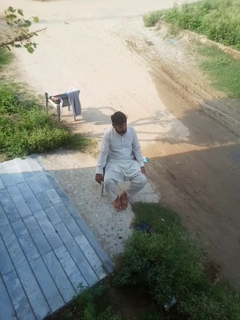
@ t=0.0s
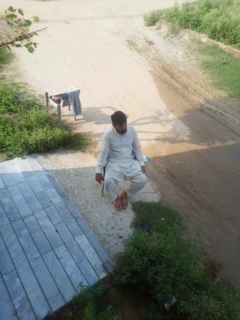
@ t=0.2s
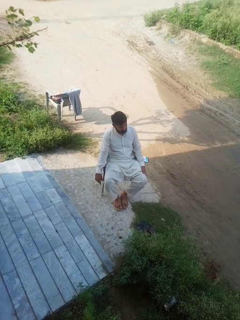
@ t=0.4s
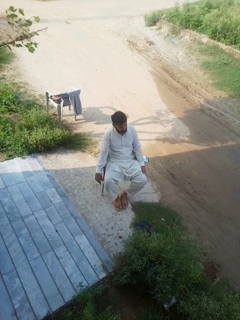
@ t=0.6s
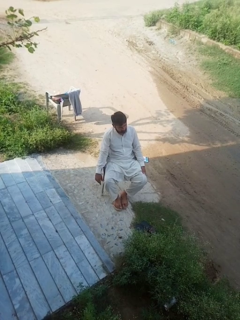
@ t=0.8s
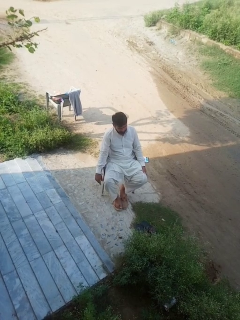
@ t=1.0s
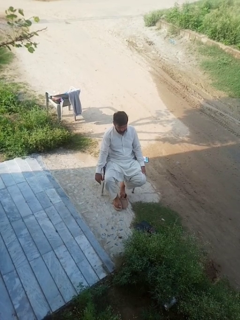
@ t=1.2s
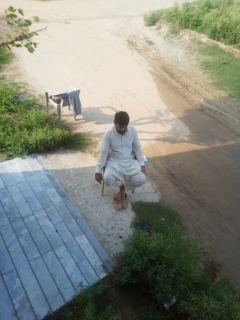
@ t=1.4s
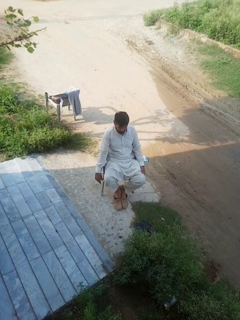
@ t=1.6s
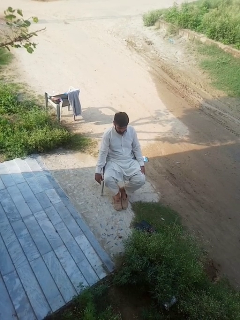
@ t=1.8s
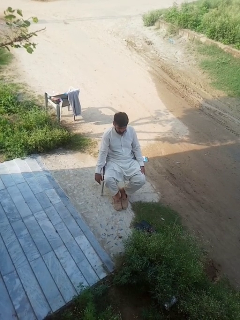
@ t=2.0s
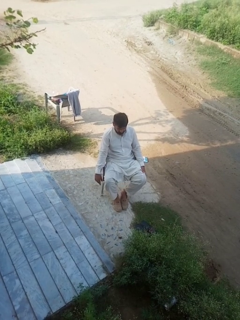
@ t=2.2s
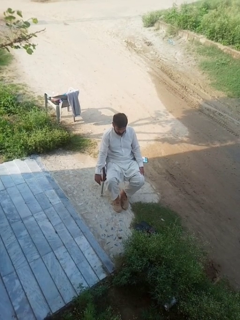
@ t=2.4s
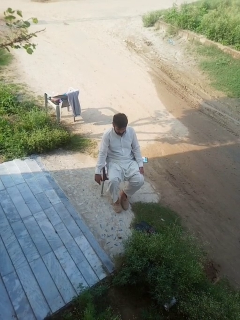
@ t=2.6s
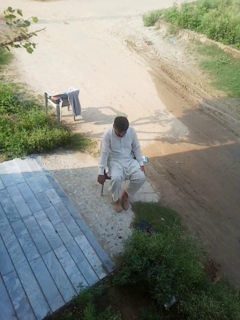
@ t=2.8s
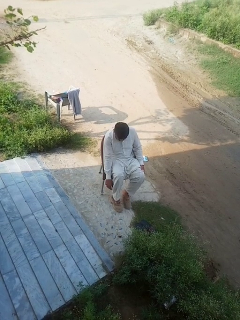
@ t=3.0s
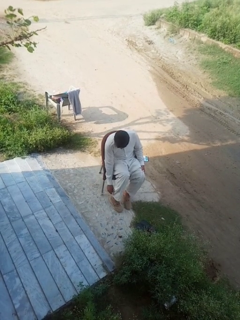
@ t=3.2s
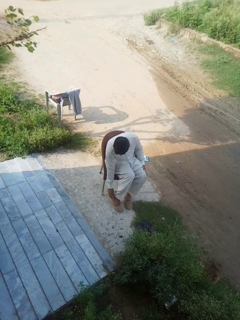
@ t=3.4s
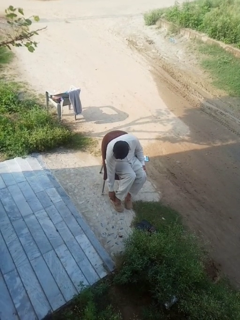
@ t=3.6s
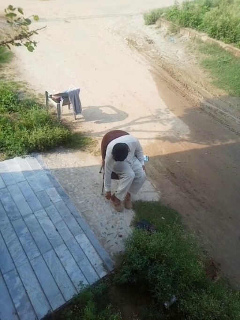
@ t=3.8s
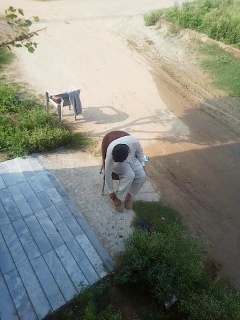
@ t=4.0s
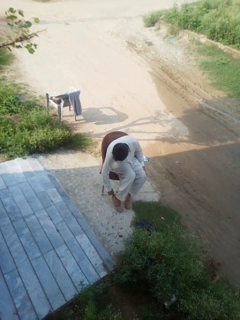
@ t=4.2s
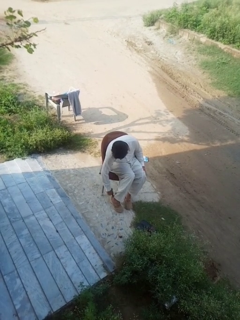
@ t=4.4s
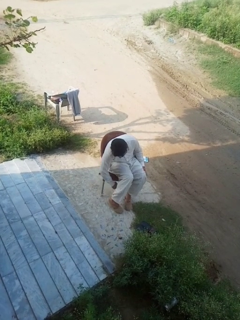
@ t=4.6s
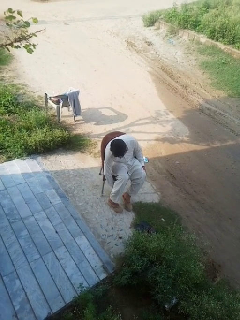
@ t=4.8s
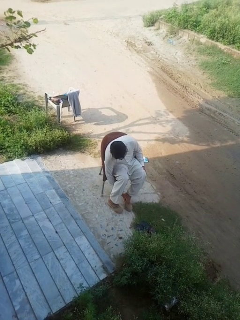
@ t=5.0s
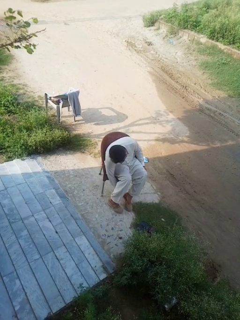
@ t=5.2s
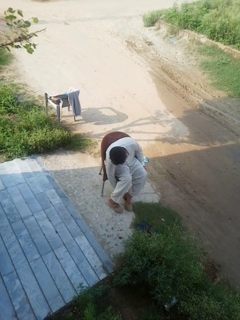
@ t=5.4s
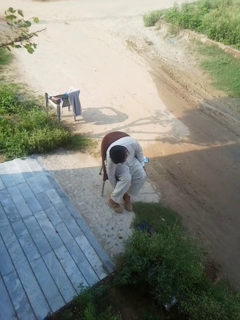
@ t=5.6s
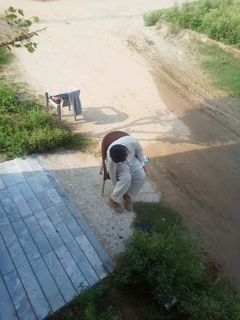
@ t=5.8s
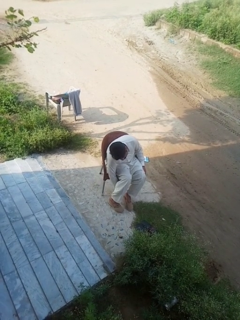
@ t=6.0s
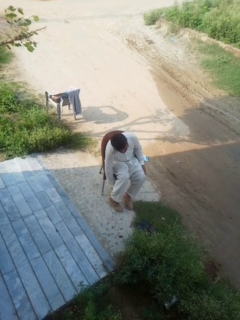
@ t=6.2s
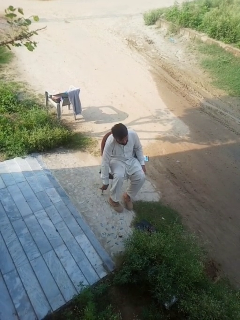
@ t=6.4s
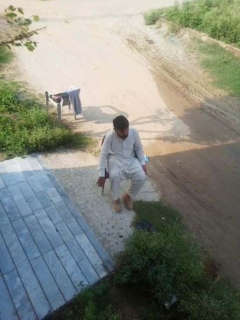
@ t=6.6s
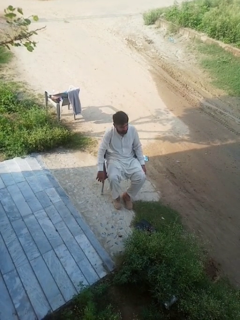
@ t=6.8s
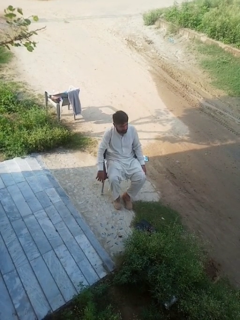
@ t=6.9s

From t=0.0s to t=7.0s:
person puts on shoes

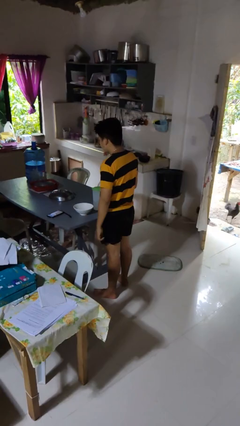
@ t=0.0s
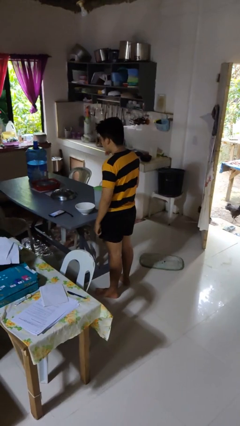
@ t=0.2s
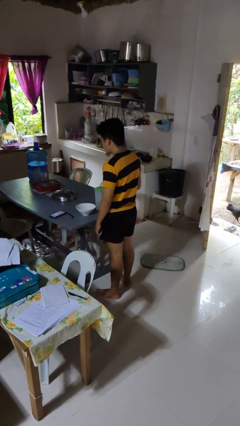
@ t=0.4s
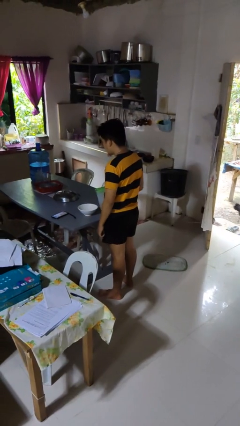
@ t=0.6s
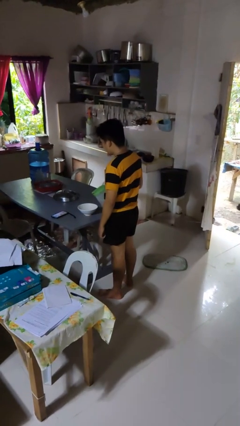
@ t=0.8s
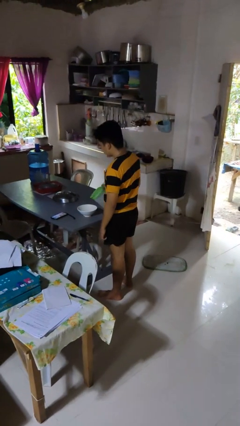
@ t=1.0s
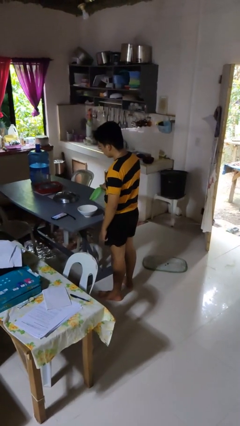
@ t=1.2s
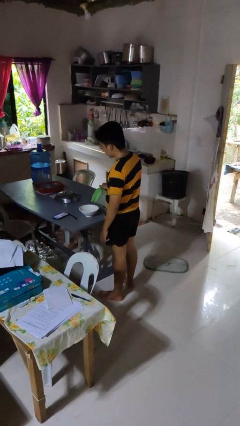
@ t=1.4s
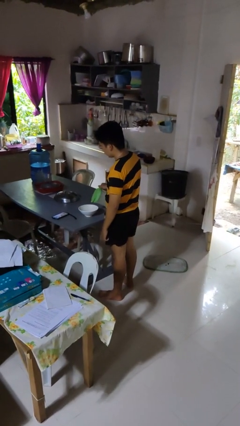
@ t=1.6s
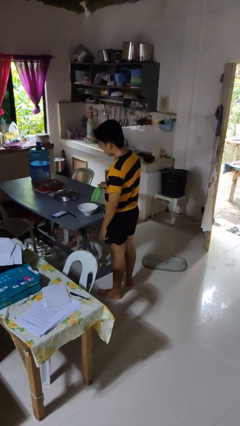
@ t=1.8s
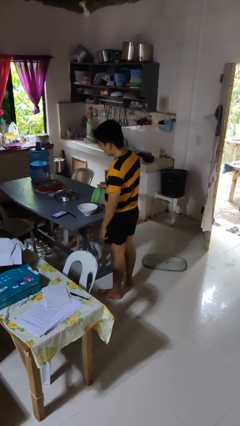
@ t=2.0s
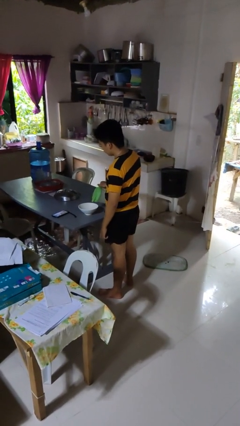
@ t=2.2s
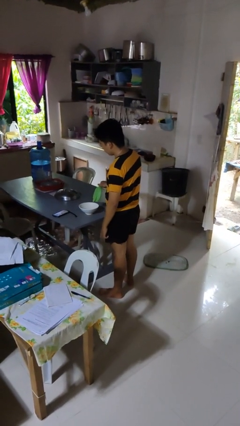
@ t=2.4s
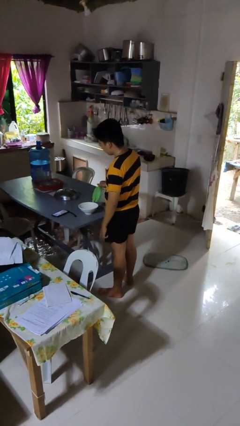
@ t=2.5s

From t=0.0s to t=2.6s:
person pours into bowl

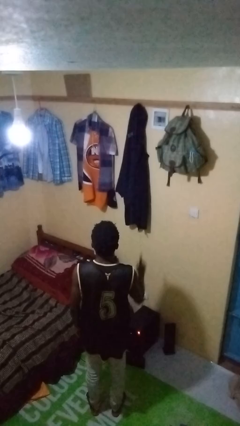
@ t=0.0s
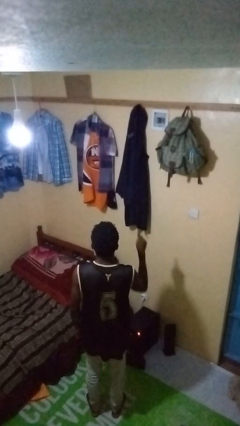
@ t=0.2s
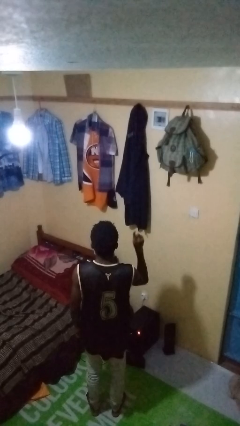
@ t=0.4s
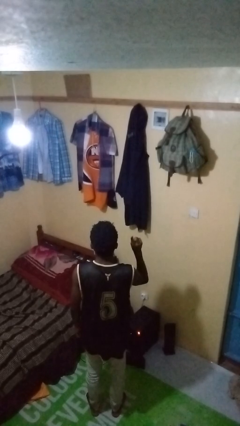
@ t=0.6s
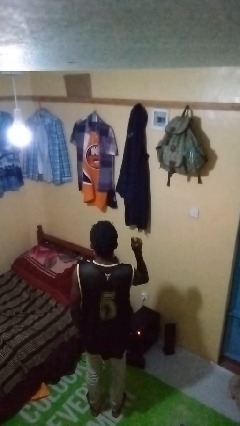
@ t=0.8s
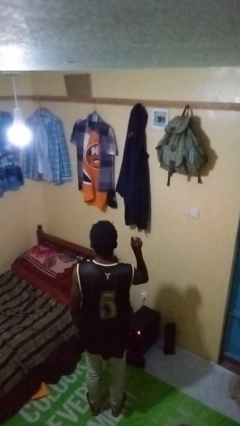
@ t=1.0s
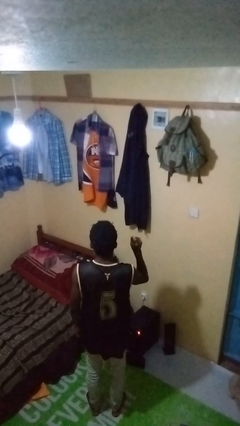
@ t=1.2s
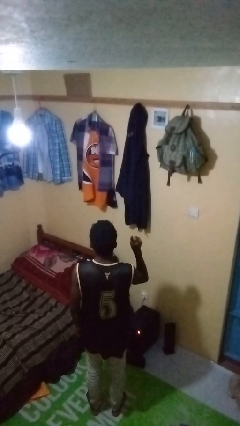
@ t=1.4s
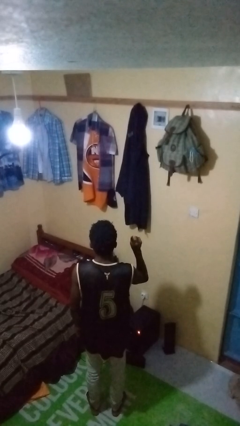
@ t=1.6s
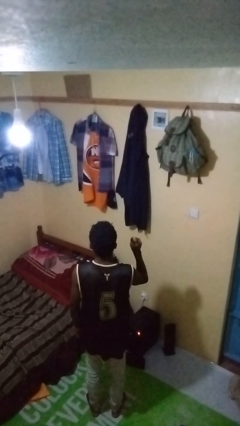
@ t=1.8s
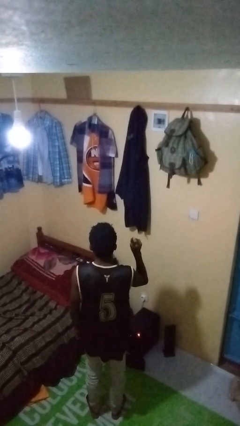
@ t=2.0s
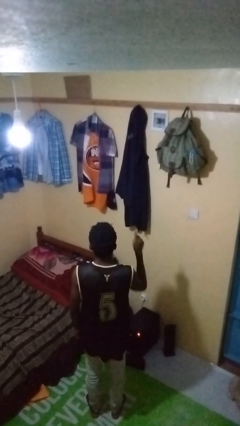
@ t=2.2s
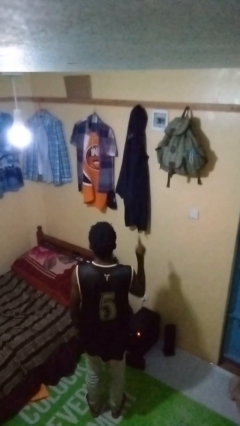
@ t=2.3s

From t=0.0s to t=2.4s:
person gestures number one

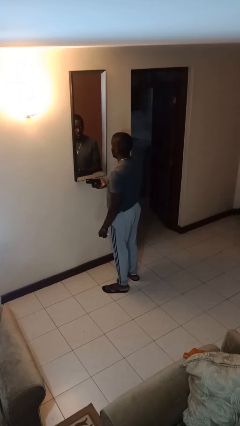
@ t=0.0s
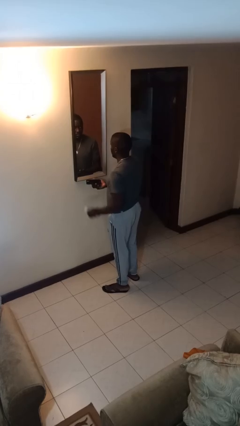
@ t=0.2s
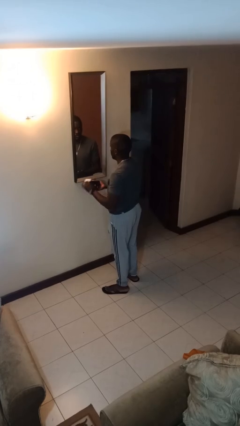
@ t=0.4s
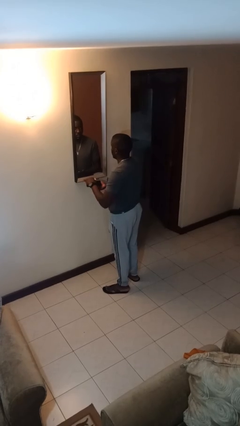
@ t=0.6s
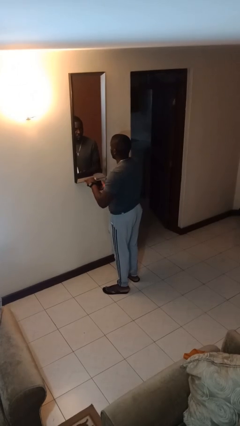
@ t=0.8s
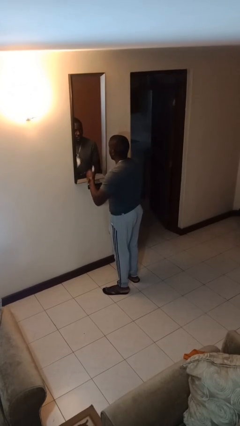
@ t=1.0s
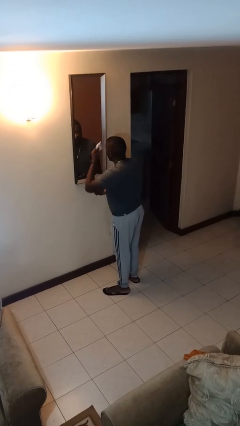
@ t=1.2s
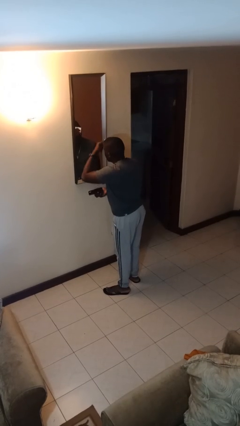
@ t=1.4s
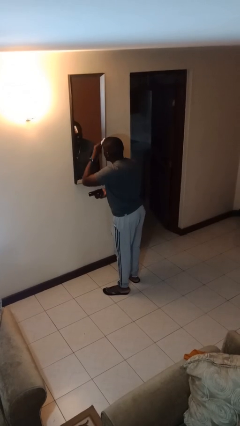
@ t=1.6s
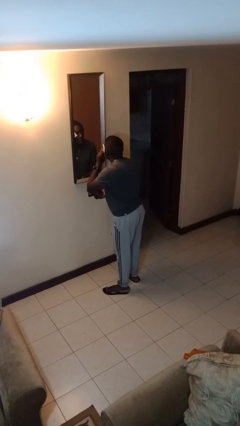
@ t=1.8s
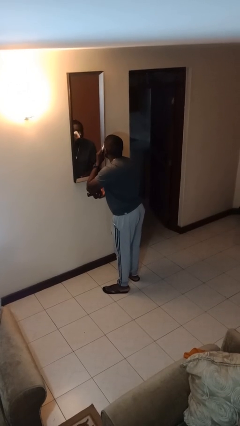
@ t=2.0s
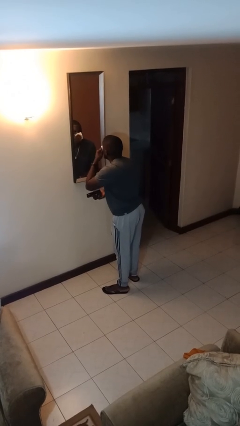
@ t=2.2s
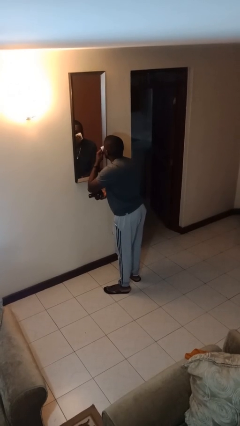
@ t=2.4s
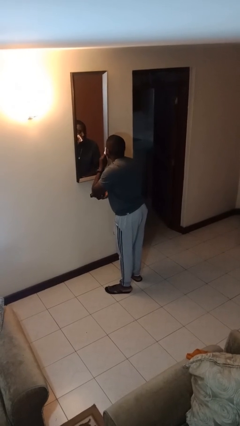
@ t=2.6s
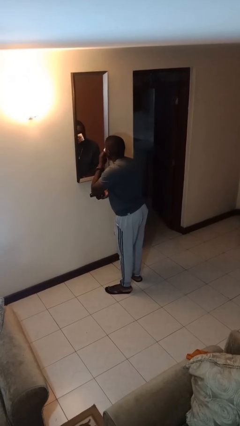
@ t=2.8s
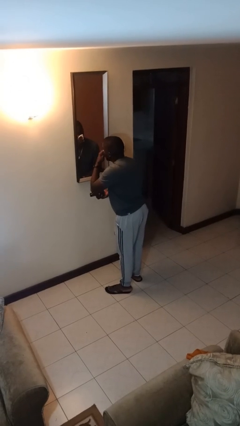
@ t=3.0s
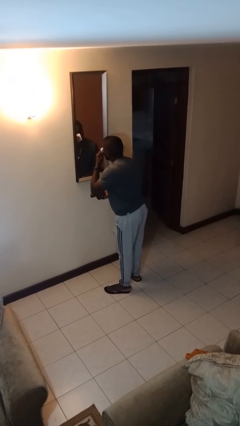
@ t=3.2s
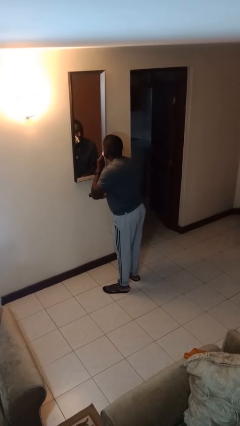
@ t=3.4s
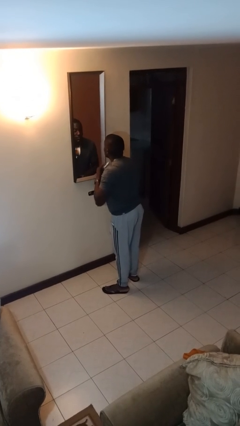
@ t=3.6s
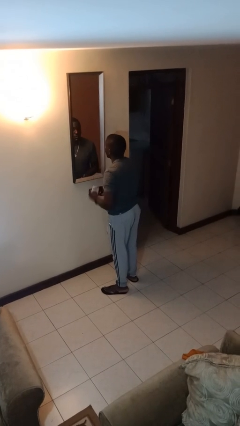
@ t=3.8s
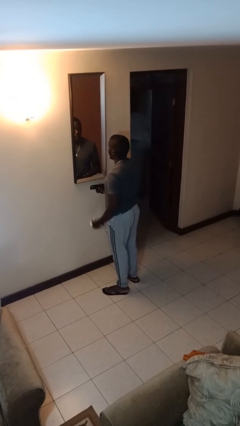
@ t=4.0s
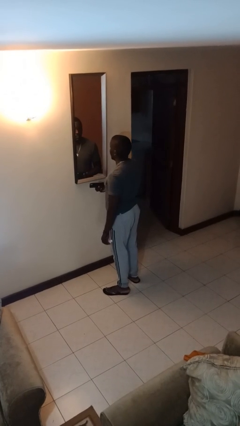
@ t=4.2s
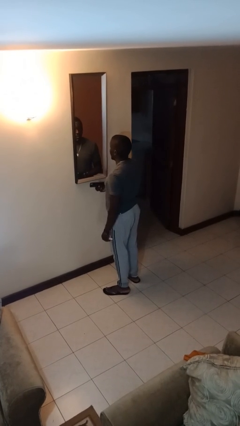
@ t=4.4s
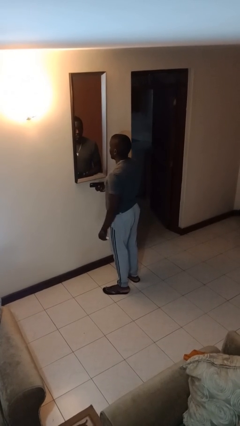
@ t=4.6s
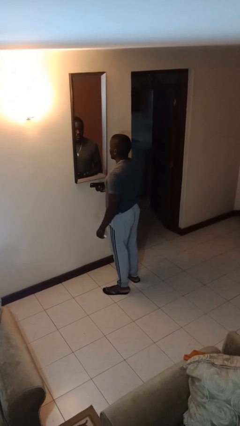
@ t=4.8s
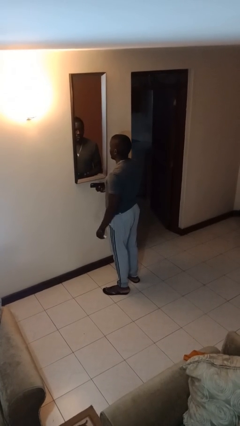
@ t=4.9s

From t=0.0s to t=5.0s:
person applies foundation makeup

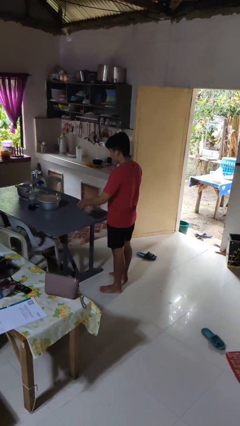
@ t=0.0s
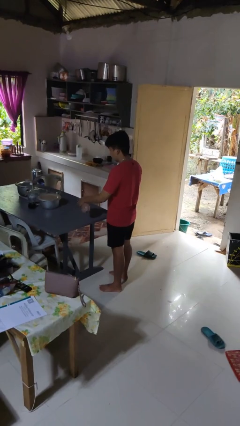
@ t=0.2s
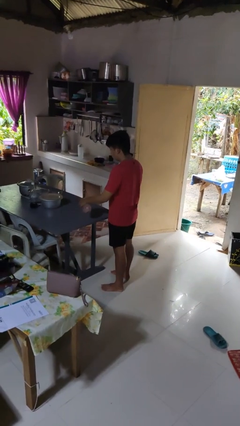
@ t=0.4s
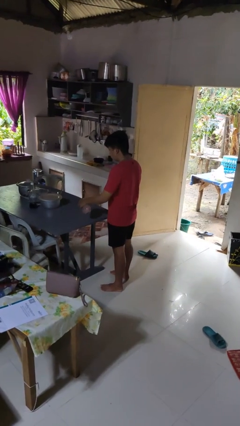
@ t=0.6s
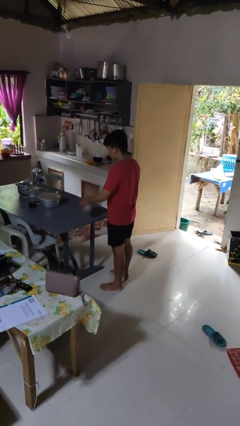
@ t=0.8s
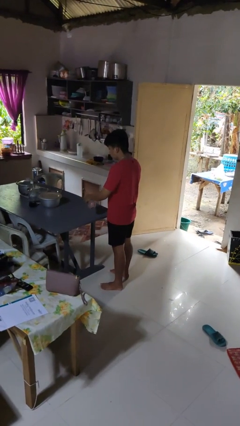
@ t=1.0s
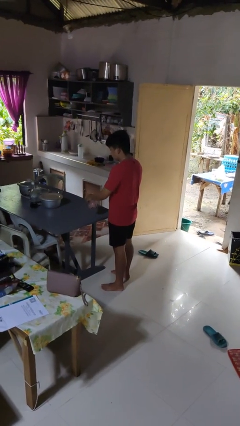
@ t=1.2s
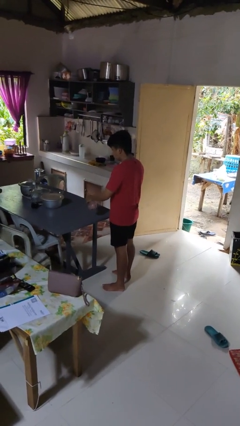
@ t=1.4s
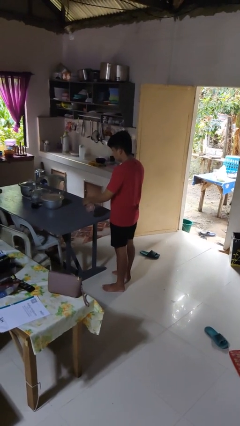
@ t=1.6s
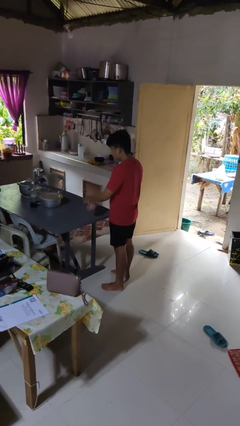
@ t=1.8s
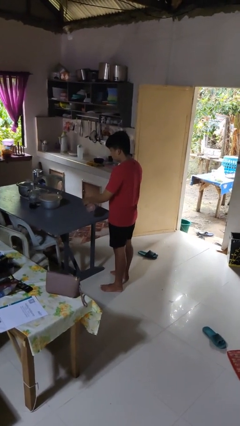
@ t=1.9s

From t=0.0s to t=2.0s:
person sprays from bottle

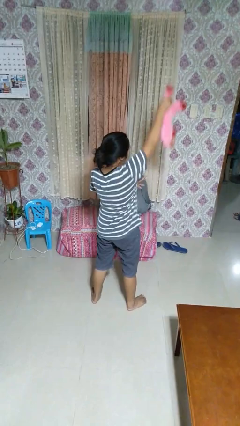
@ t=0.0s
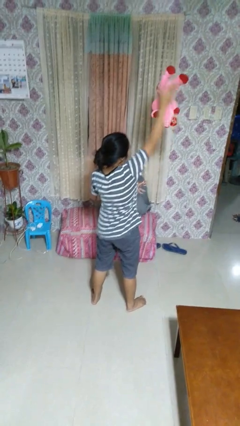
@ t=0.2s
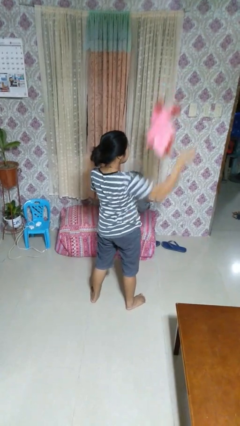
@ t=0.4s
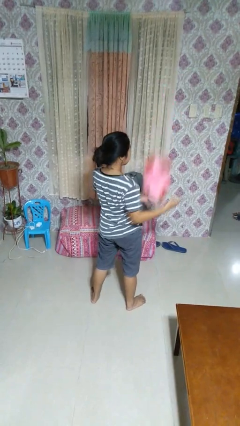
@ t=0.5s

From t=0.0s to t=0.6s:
person drops object
